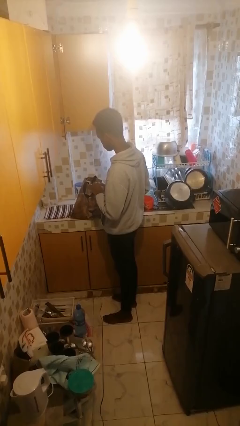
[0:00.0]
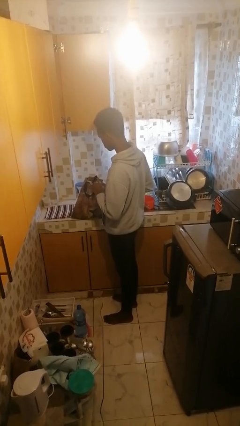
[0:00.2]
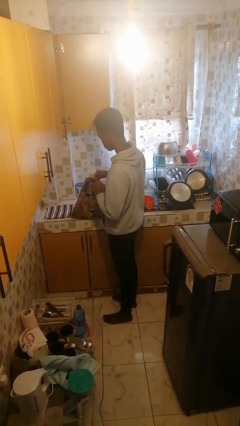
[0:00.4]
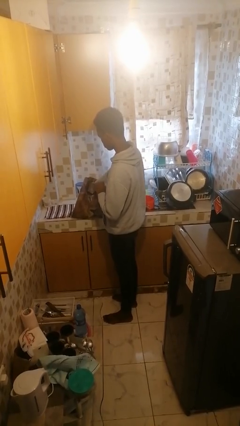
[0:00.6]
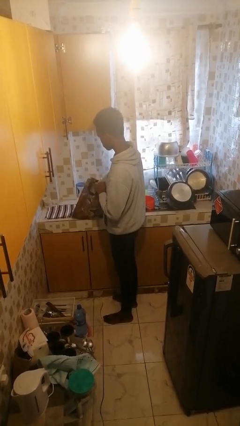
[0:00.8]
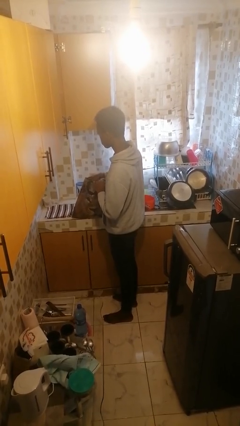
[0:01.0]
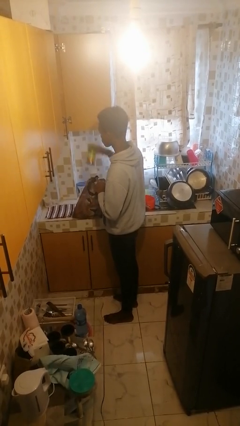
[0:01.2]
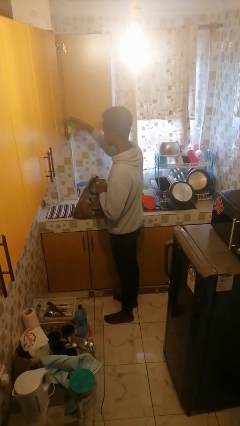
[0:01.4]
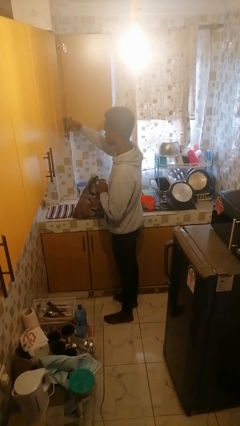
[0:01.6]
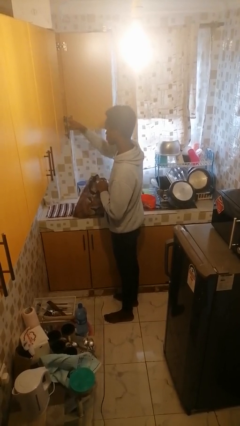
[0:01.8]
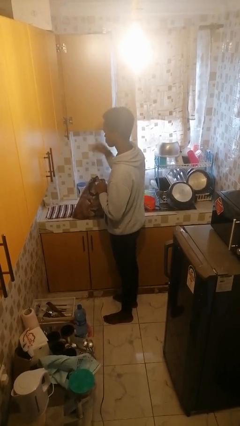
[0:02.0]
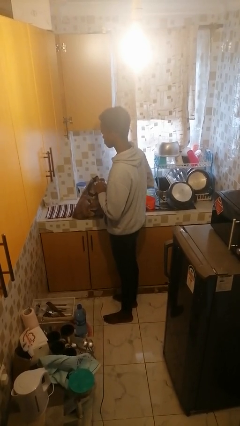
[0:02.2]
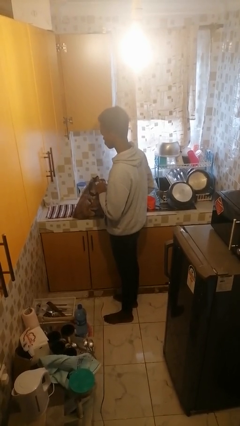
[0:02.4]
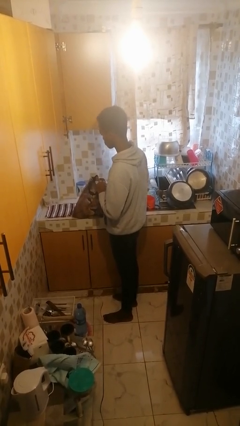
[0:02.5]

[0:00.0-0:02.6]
person loads groceries into cabinet

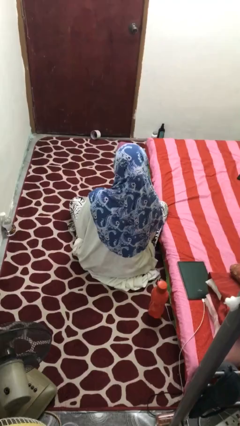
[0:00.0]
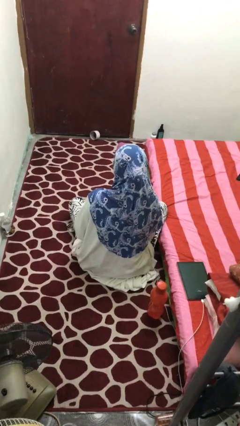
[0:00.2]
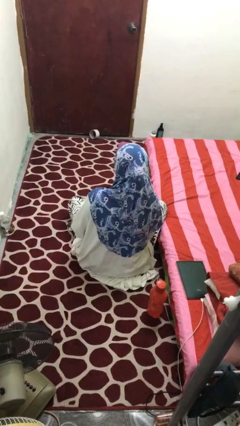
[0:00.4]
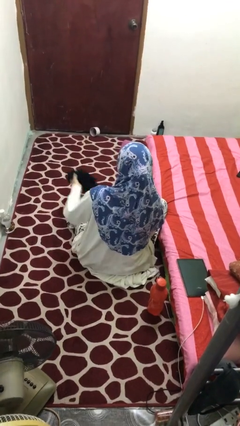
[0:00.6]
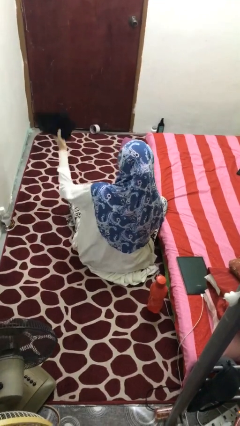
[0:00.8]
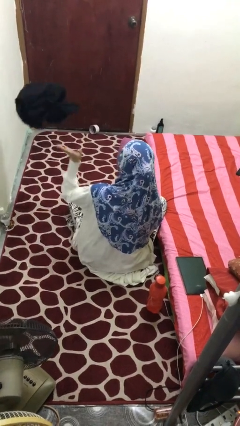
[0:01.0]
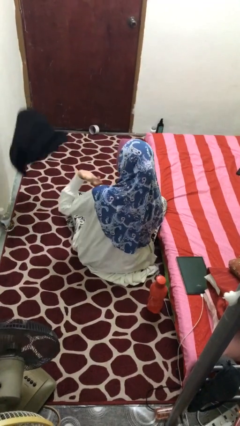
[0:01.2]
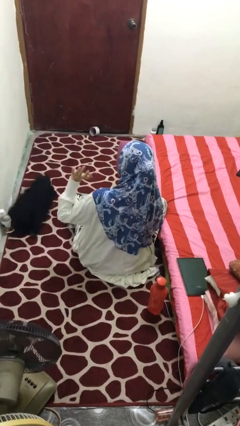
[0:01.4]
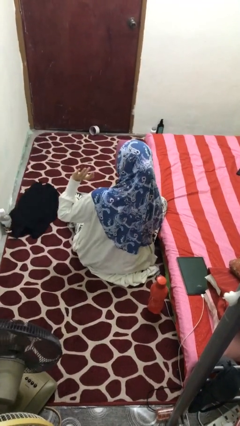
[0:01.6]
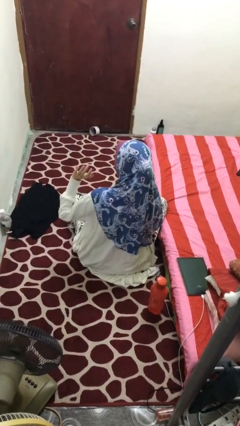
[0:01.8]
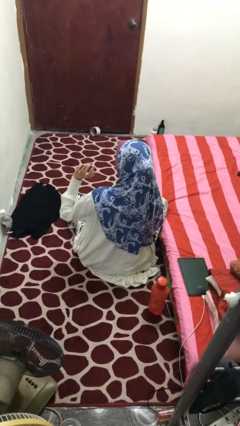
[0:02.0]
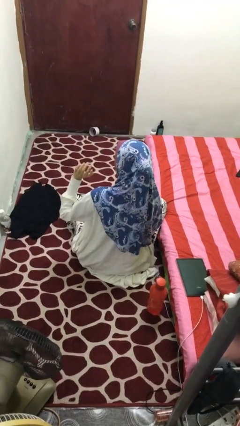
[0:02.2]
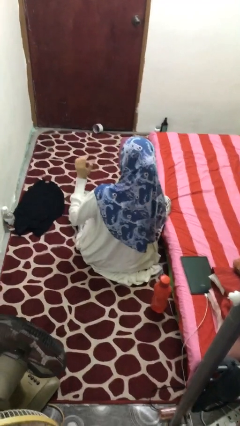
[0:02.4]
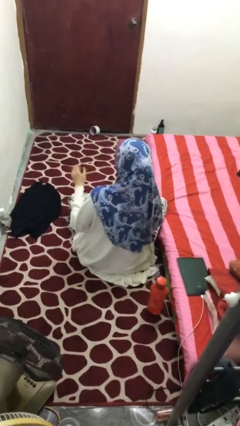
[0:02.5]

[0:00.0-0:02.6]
person throws object into air

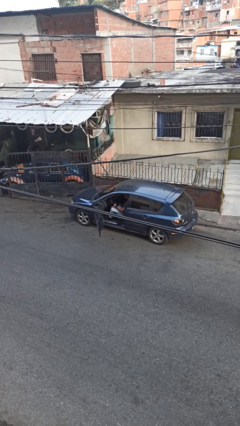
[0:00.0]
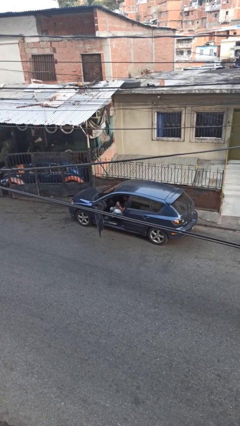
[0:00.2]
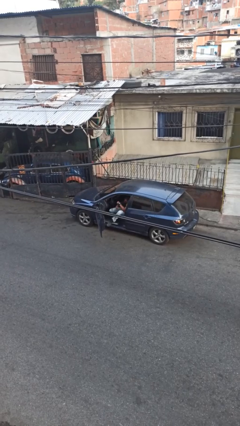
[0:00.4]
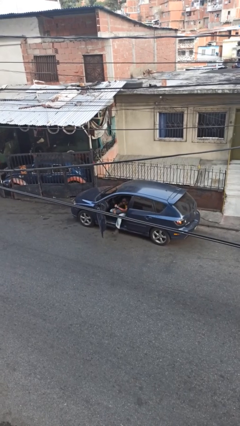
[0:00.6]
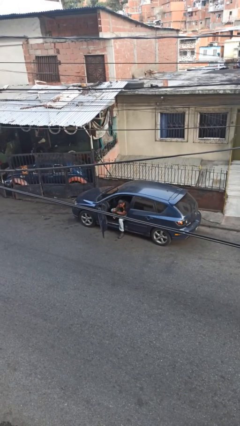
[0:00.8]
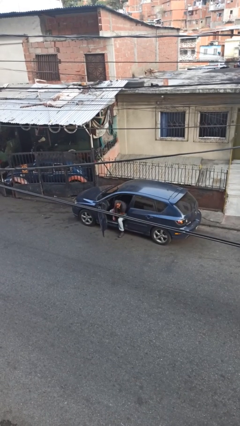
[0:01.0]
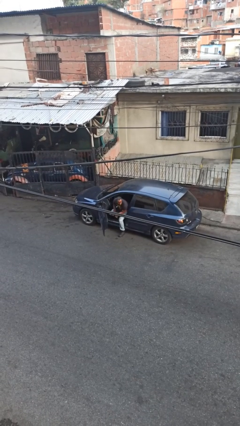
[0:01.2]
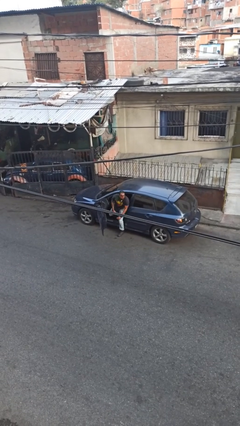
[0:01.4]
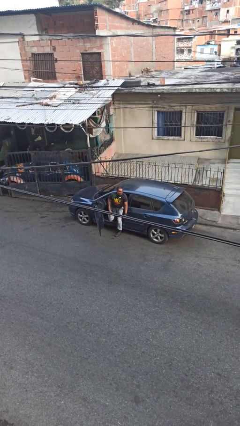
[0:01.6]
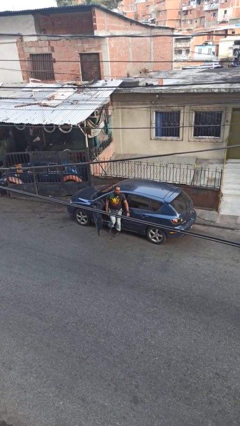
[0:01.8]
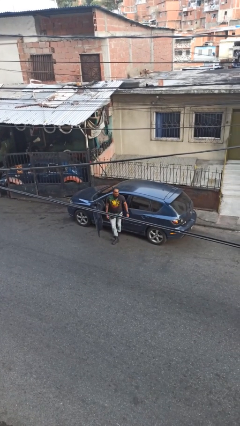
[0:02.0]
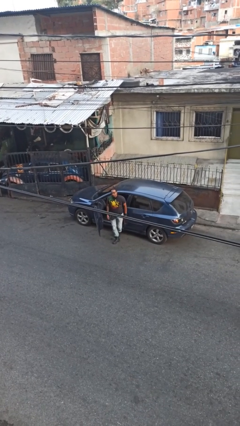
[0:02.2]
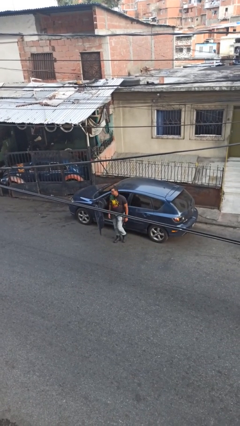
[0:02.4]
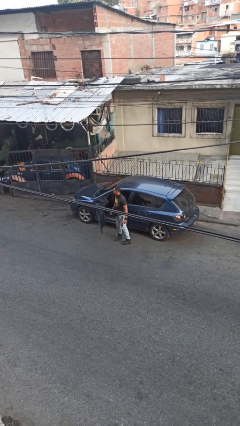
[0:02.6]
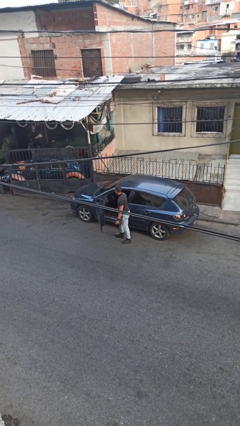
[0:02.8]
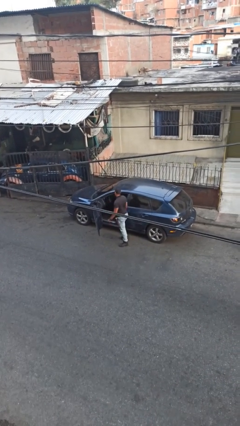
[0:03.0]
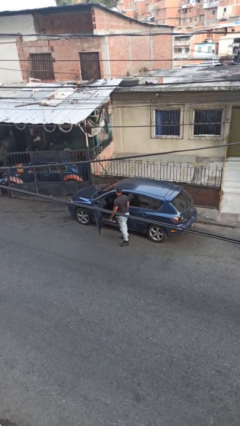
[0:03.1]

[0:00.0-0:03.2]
person exits car

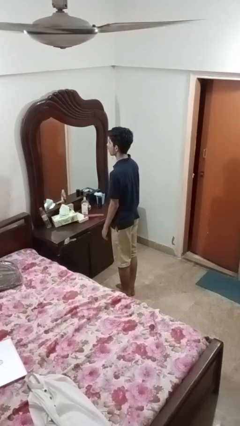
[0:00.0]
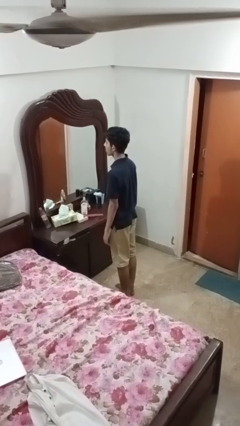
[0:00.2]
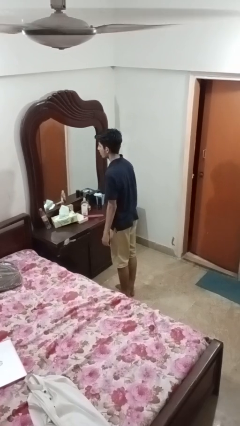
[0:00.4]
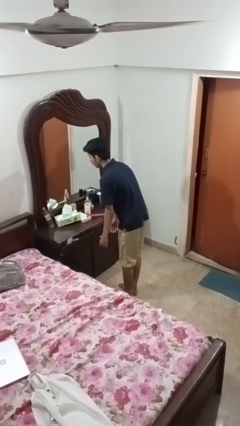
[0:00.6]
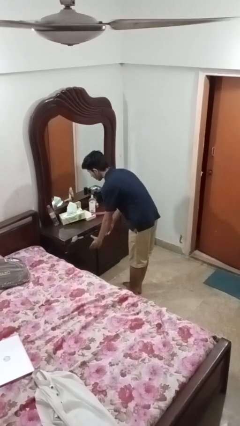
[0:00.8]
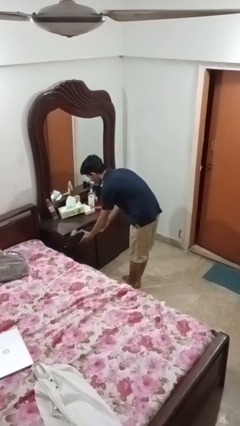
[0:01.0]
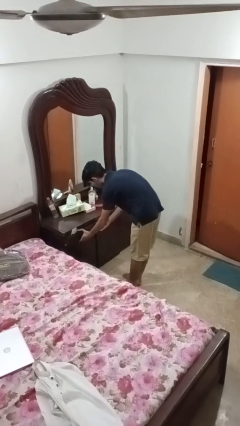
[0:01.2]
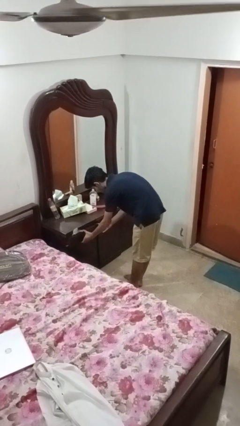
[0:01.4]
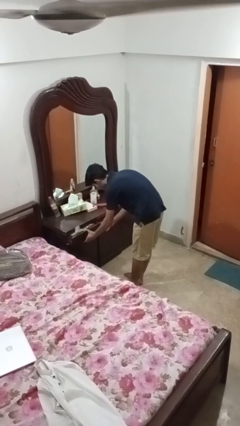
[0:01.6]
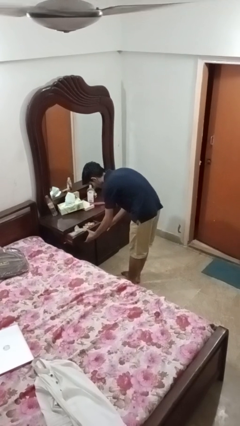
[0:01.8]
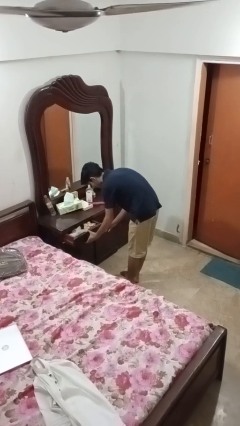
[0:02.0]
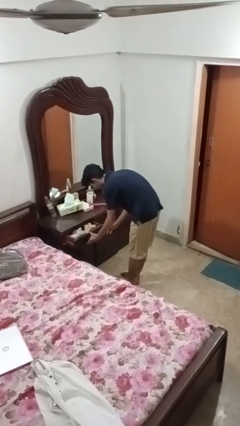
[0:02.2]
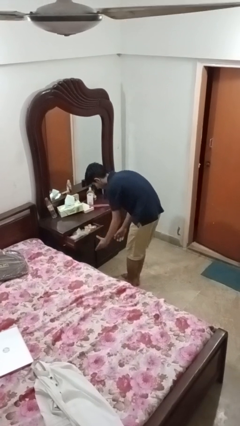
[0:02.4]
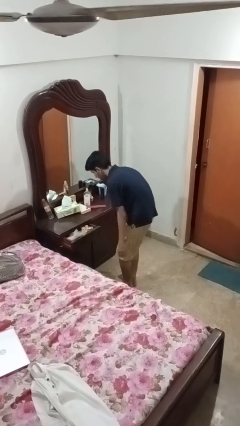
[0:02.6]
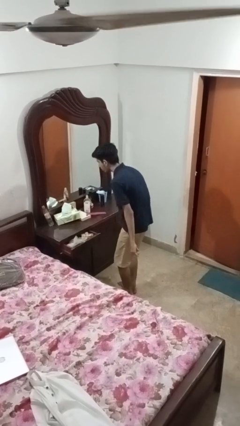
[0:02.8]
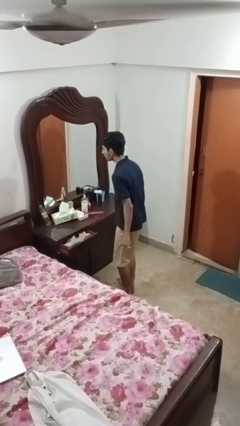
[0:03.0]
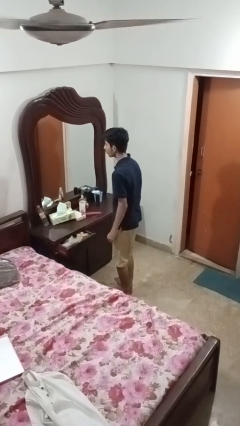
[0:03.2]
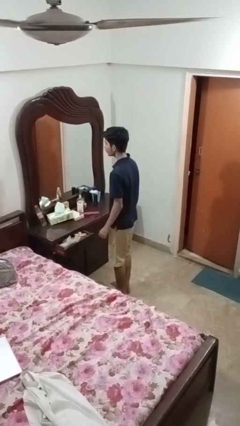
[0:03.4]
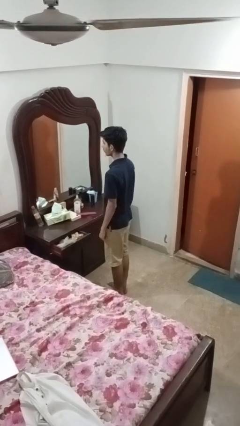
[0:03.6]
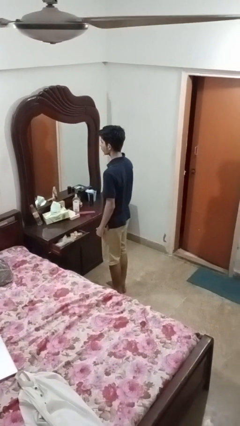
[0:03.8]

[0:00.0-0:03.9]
person opens dresser drawer

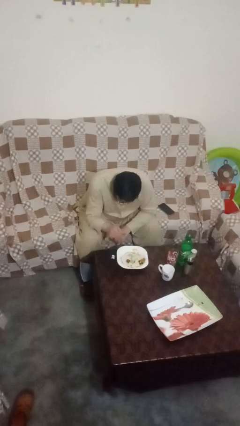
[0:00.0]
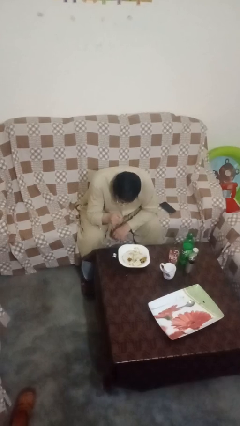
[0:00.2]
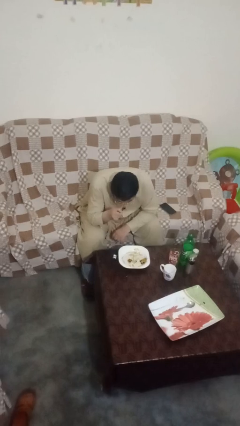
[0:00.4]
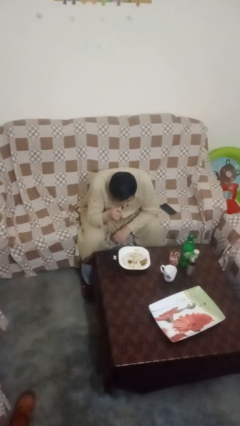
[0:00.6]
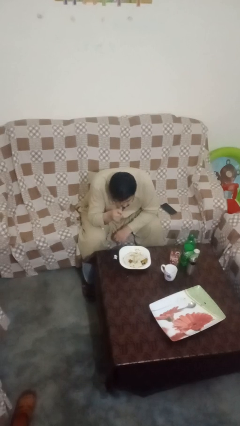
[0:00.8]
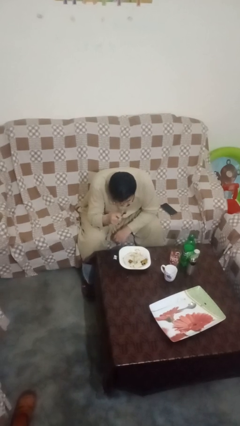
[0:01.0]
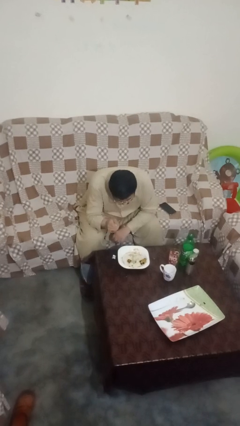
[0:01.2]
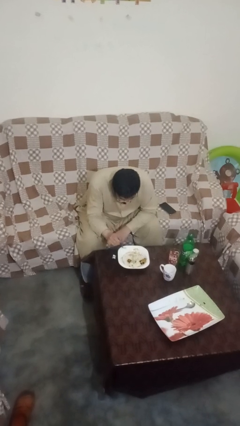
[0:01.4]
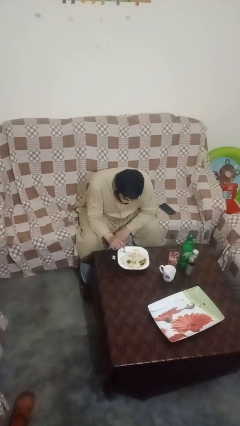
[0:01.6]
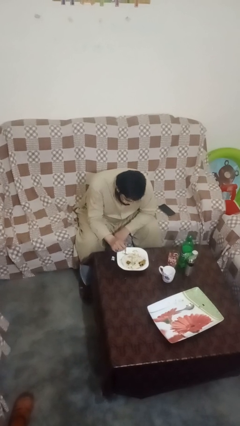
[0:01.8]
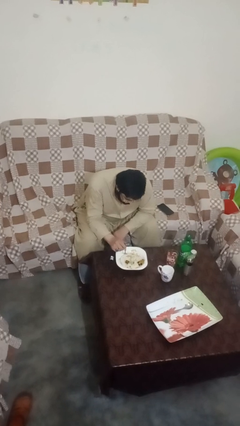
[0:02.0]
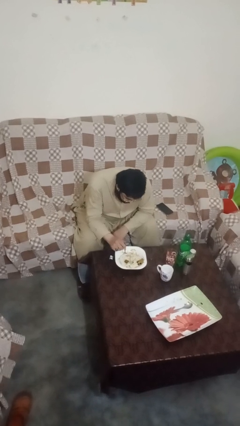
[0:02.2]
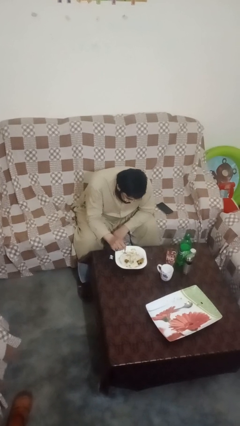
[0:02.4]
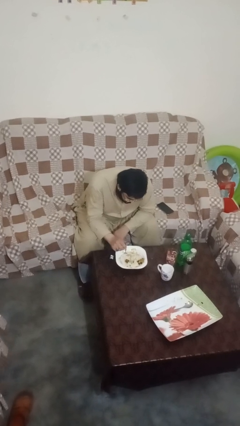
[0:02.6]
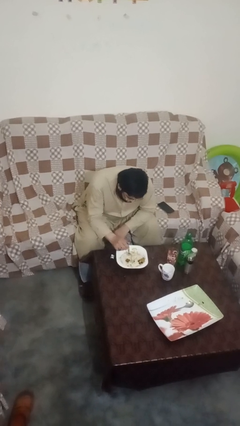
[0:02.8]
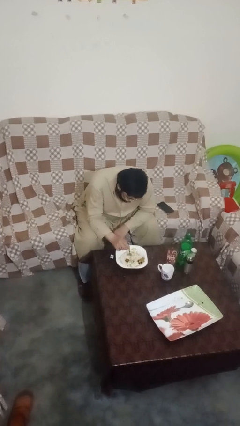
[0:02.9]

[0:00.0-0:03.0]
person eats with utensil

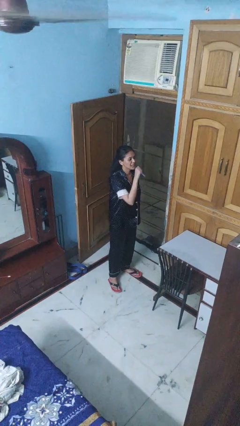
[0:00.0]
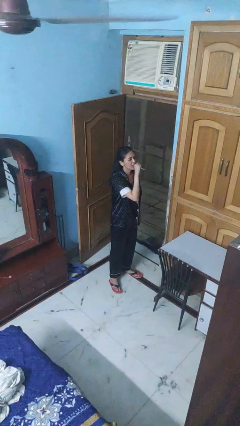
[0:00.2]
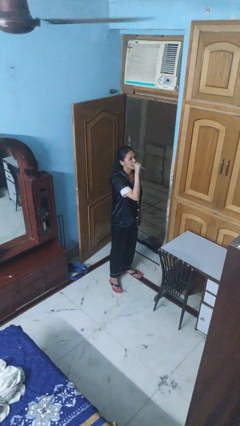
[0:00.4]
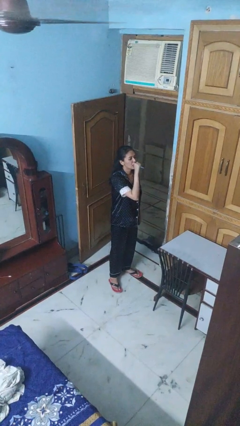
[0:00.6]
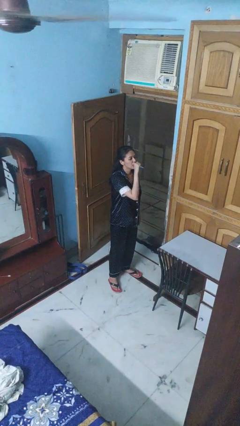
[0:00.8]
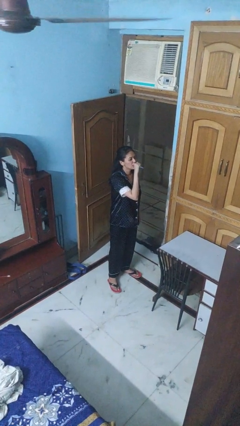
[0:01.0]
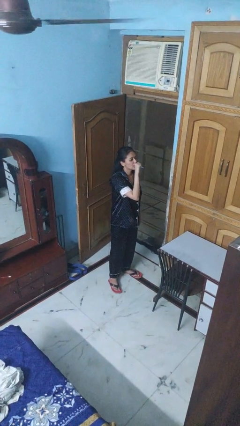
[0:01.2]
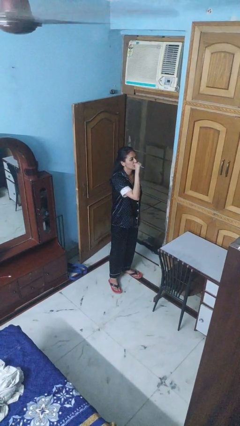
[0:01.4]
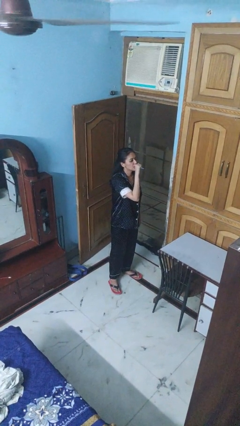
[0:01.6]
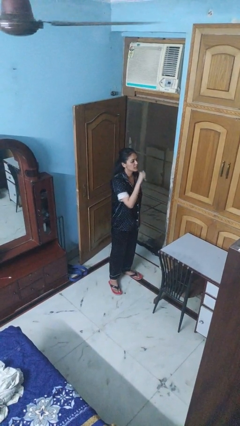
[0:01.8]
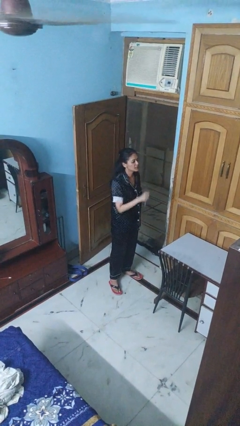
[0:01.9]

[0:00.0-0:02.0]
person vapes

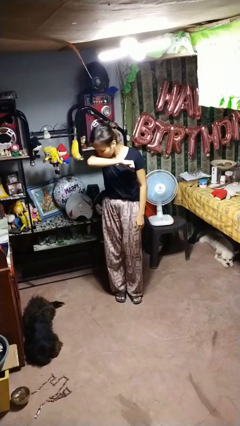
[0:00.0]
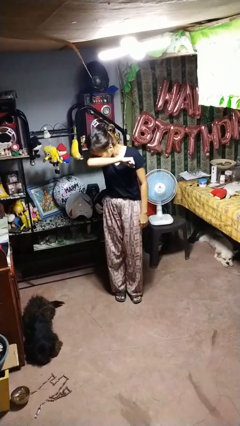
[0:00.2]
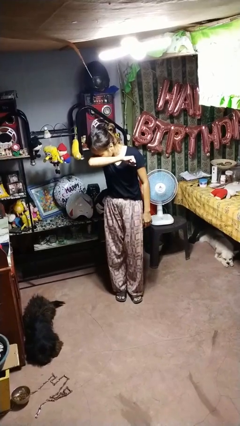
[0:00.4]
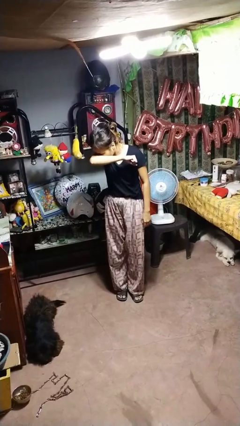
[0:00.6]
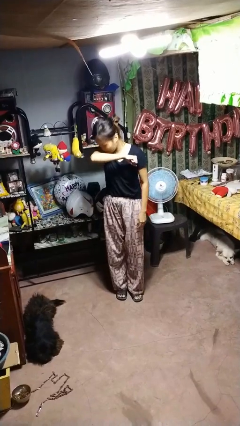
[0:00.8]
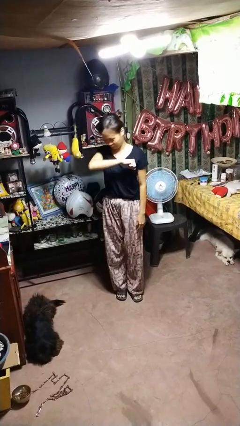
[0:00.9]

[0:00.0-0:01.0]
person sneezes into arm
